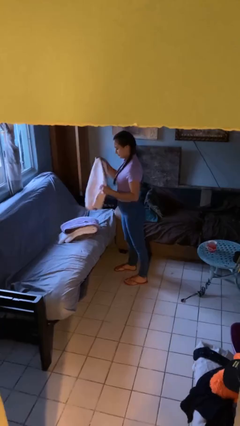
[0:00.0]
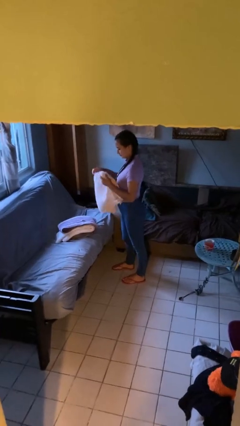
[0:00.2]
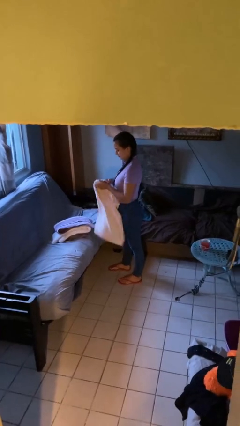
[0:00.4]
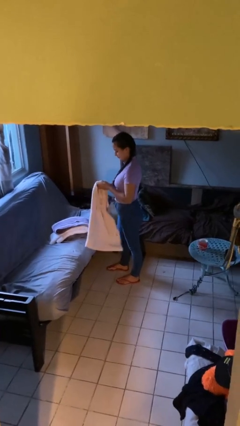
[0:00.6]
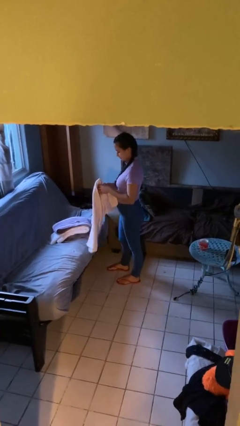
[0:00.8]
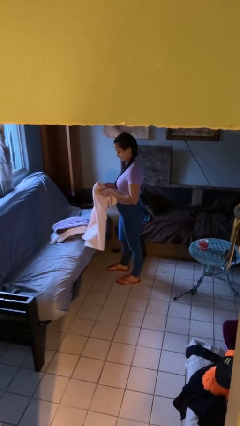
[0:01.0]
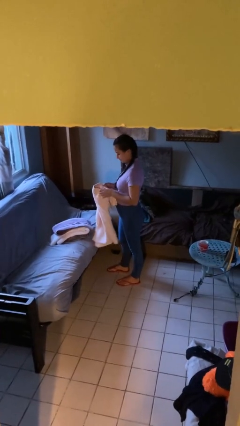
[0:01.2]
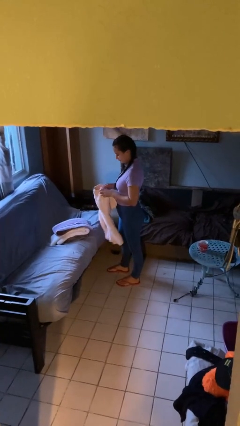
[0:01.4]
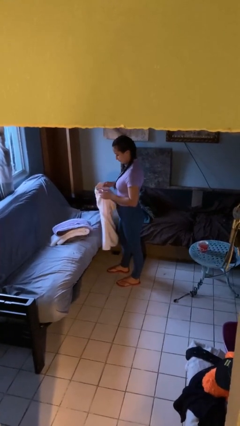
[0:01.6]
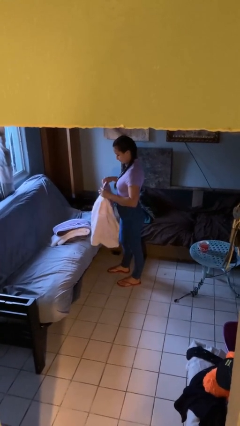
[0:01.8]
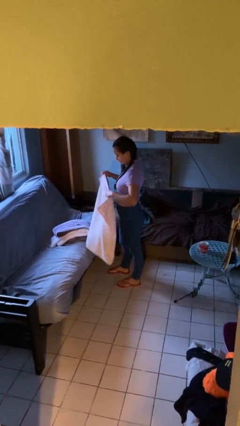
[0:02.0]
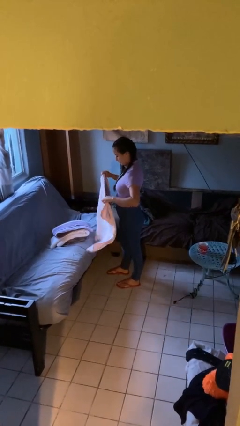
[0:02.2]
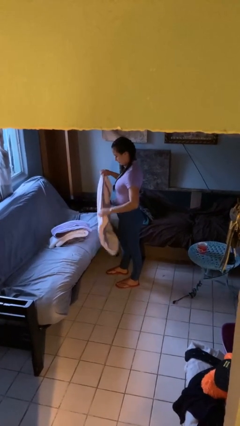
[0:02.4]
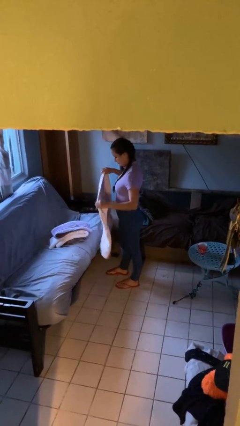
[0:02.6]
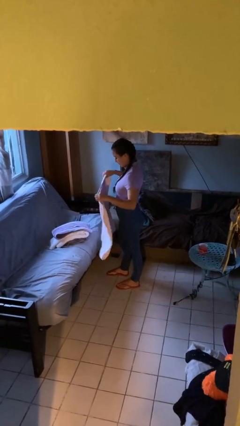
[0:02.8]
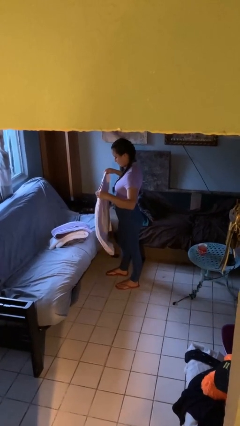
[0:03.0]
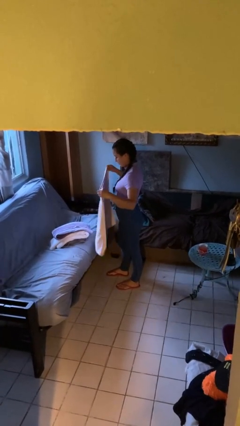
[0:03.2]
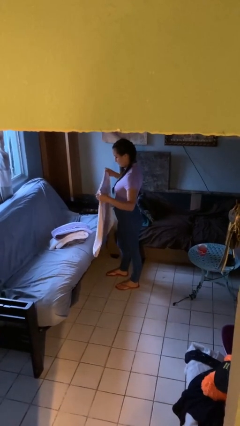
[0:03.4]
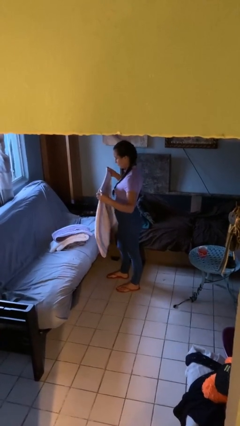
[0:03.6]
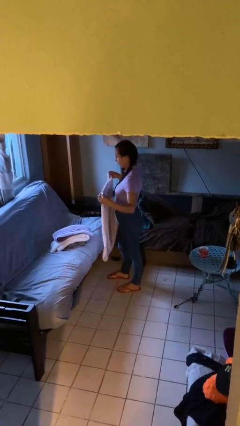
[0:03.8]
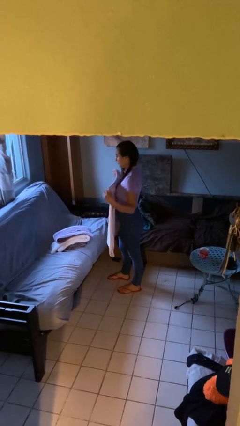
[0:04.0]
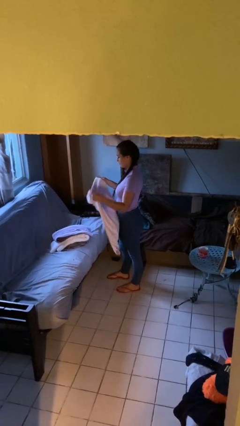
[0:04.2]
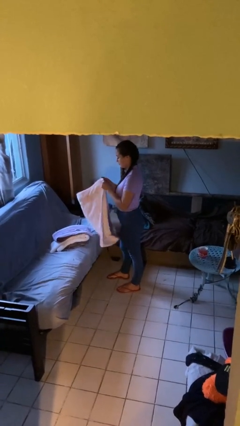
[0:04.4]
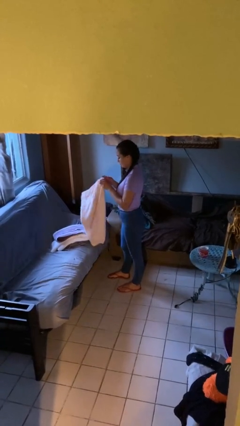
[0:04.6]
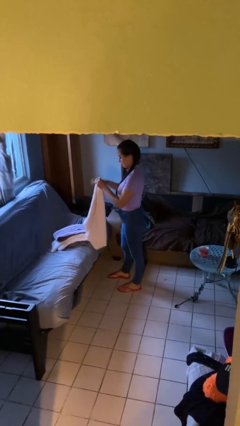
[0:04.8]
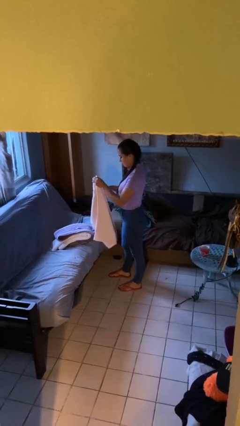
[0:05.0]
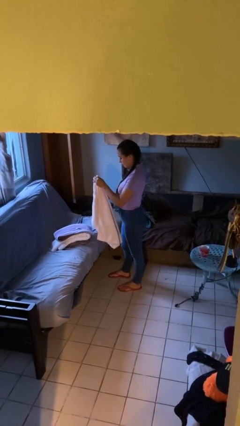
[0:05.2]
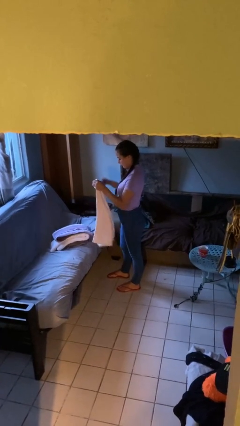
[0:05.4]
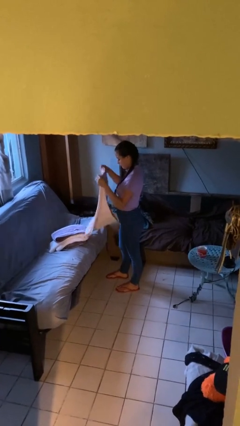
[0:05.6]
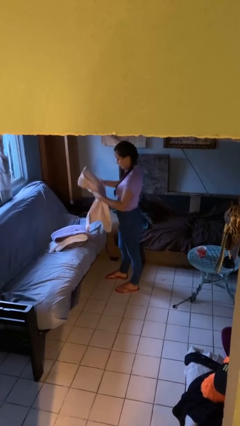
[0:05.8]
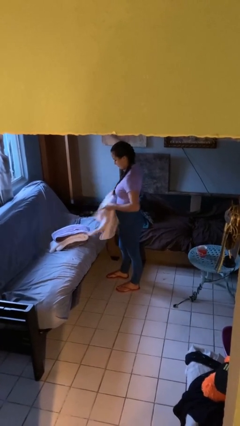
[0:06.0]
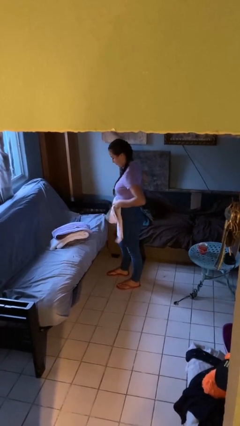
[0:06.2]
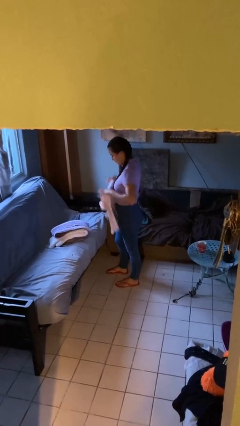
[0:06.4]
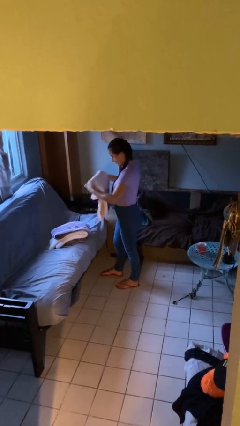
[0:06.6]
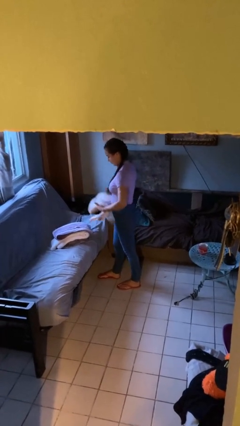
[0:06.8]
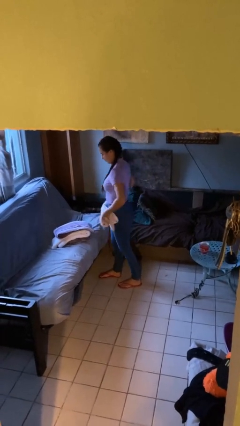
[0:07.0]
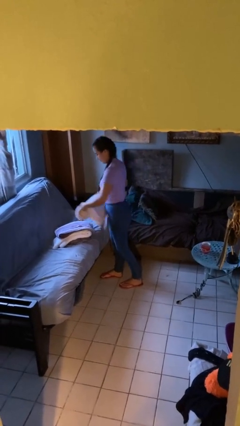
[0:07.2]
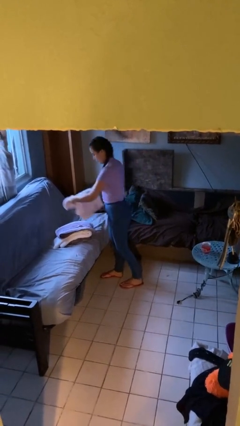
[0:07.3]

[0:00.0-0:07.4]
person folds towel

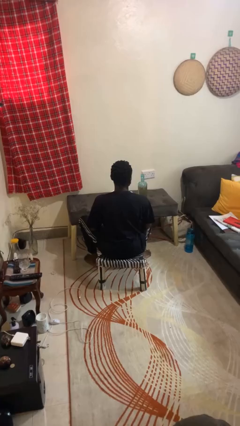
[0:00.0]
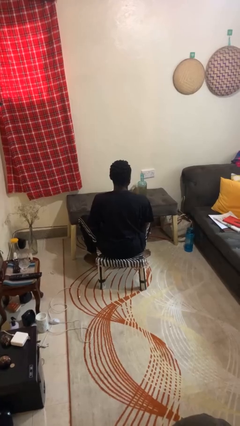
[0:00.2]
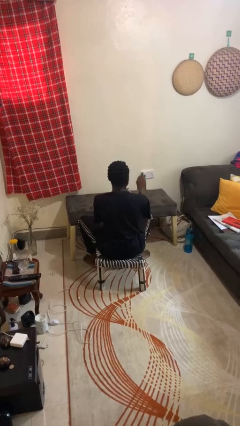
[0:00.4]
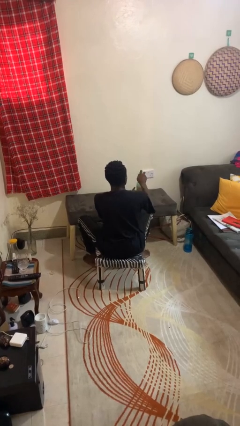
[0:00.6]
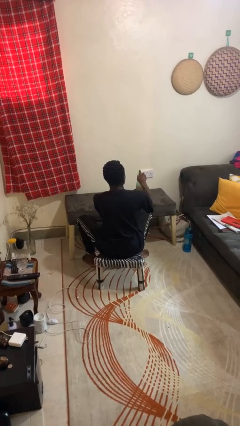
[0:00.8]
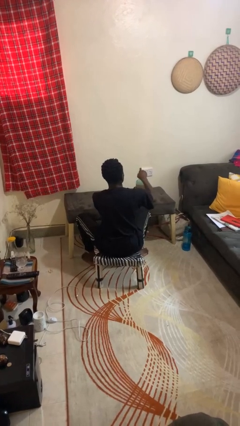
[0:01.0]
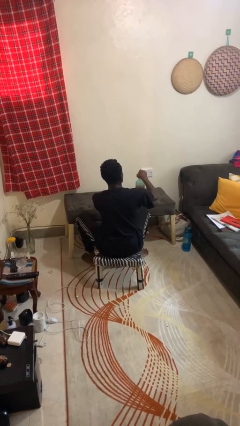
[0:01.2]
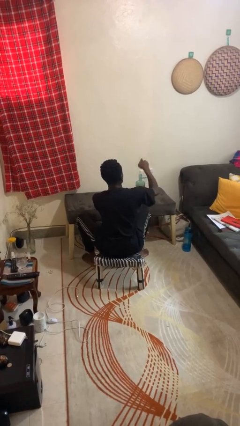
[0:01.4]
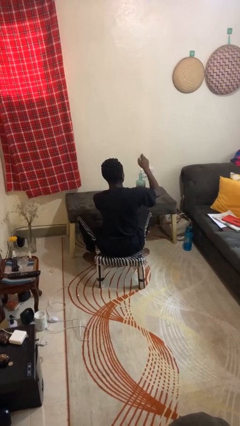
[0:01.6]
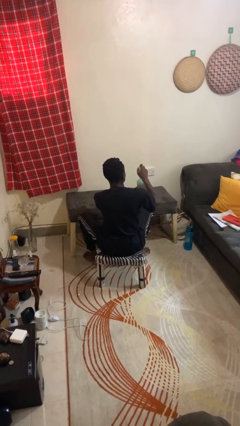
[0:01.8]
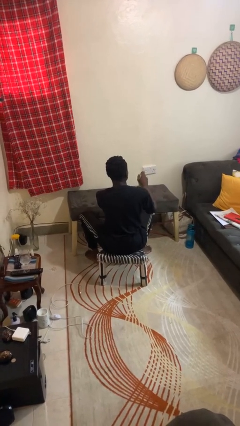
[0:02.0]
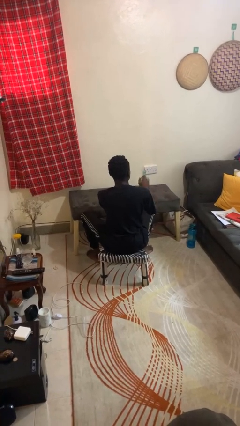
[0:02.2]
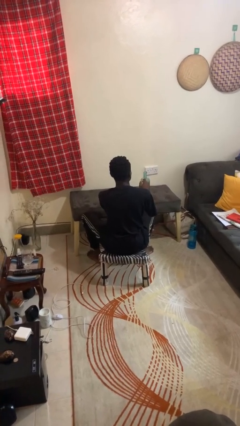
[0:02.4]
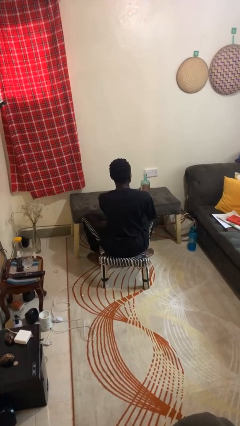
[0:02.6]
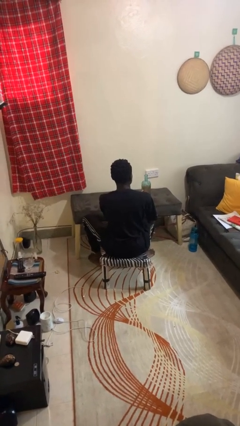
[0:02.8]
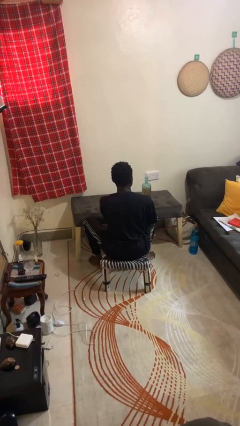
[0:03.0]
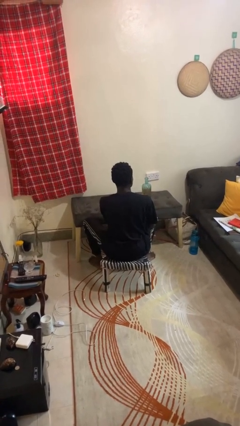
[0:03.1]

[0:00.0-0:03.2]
person opens jar

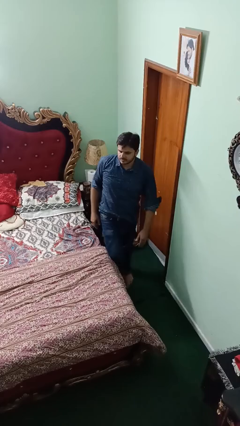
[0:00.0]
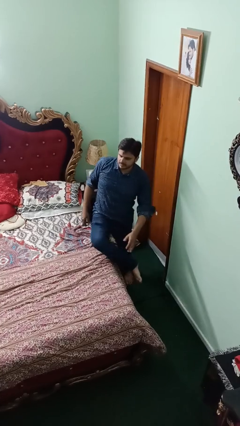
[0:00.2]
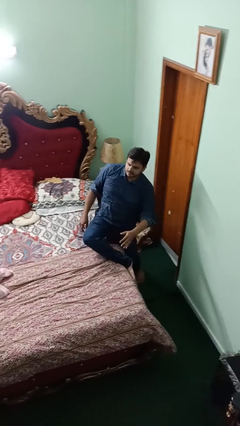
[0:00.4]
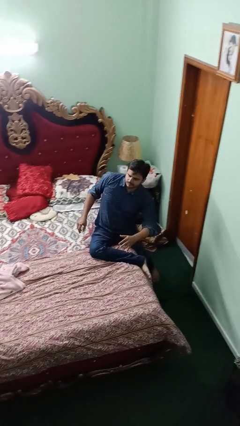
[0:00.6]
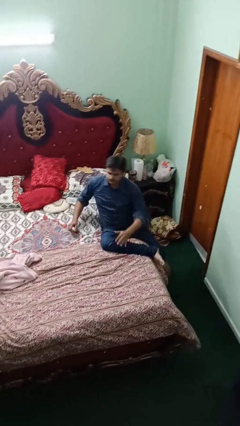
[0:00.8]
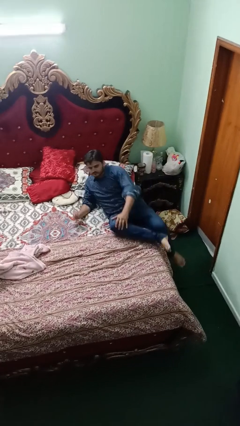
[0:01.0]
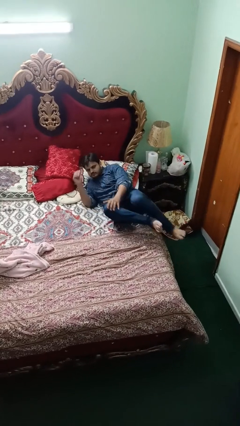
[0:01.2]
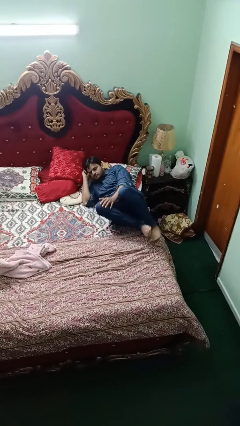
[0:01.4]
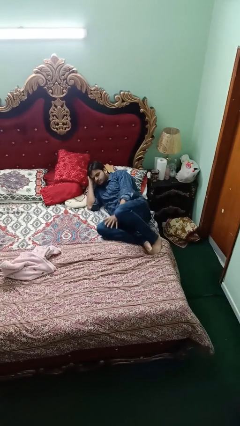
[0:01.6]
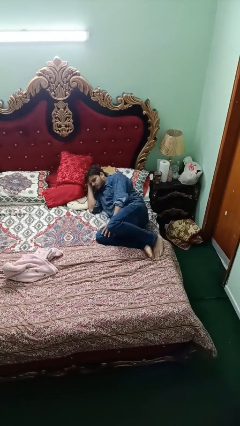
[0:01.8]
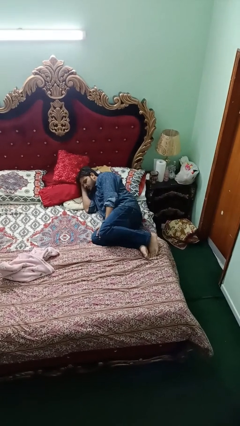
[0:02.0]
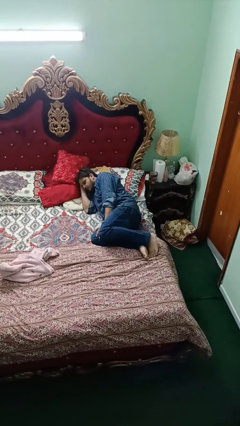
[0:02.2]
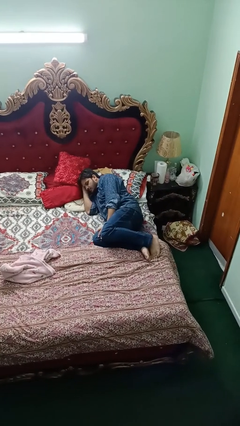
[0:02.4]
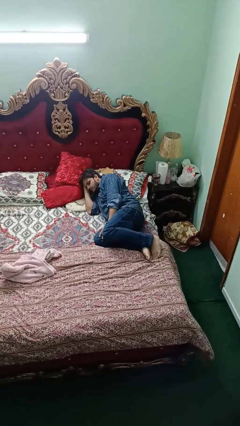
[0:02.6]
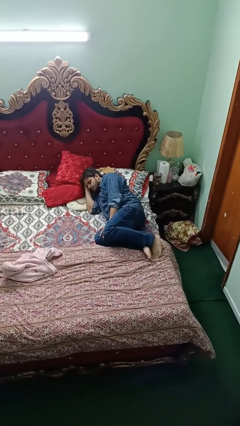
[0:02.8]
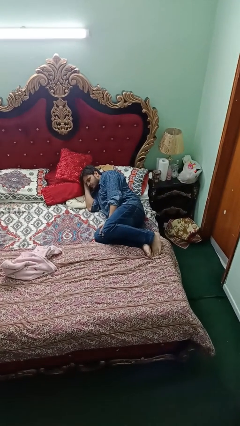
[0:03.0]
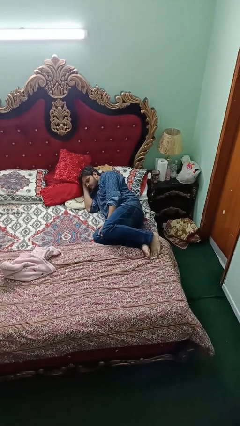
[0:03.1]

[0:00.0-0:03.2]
person lies down on bed

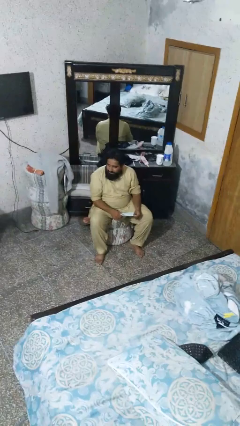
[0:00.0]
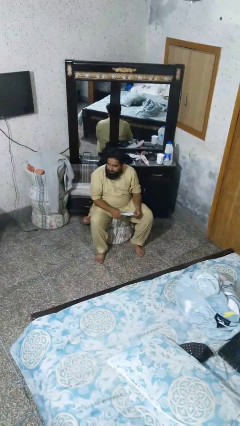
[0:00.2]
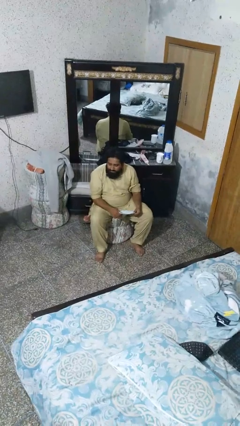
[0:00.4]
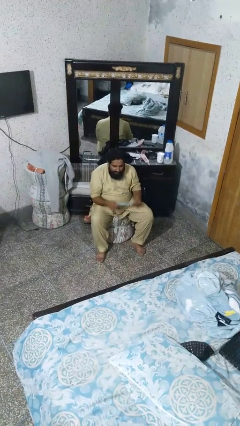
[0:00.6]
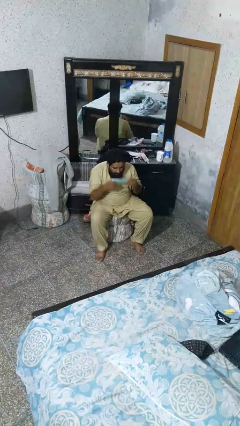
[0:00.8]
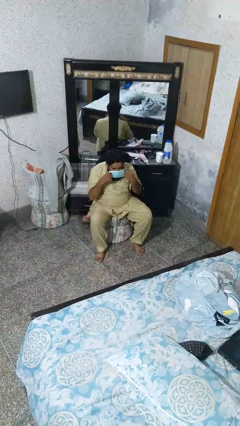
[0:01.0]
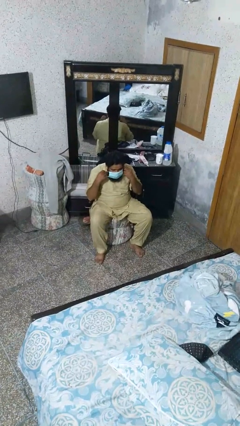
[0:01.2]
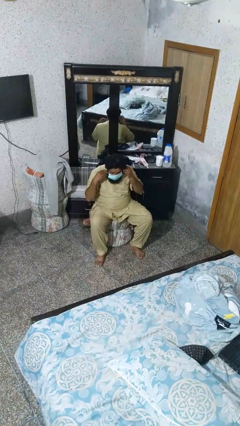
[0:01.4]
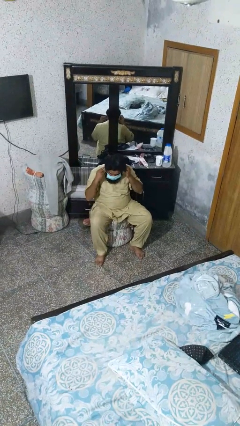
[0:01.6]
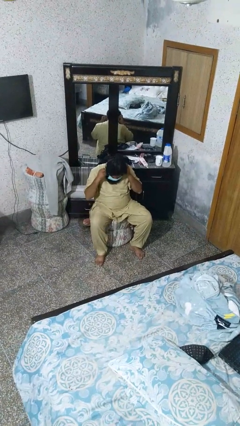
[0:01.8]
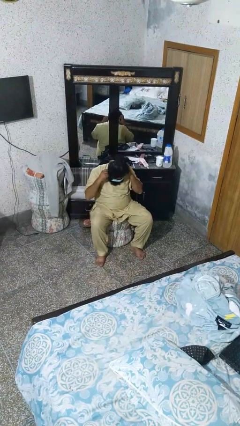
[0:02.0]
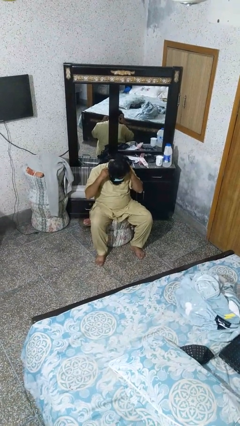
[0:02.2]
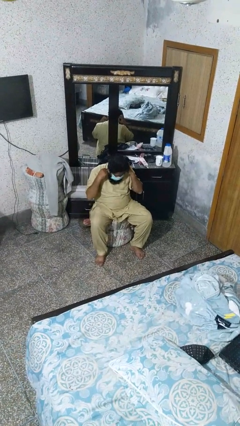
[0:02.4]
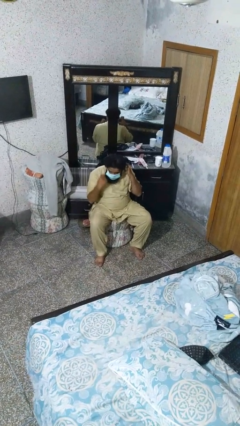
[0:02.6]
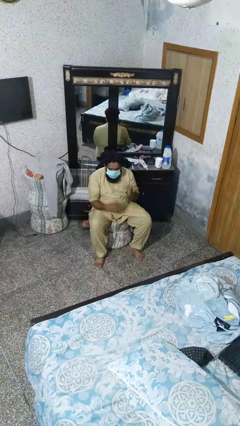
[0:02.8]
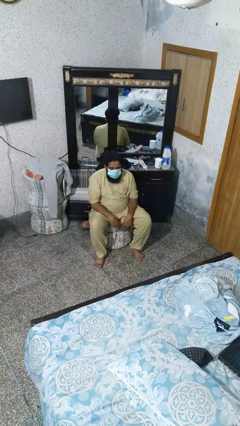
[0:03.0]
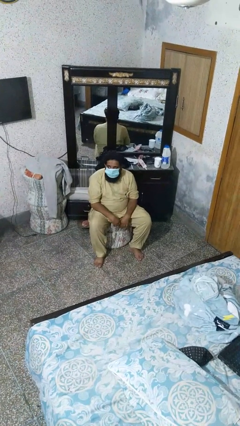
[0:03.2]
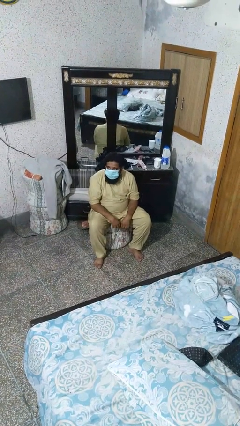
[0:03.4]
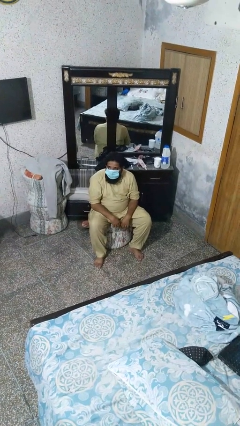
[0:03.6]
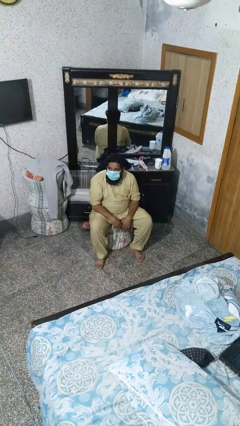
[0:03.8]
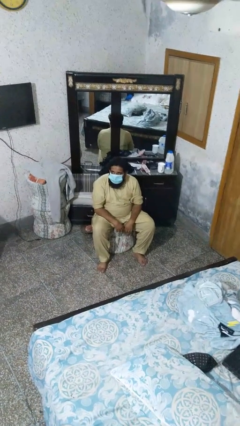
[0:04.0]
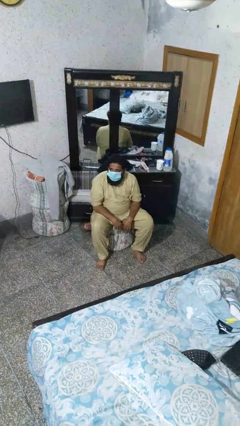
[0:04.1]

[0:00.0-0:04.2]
person puts on facemask
